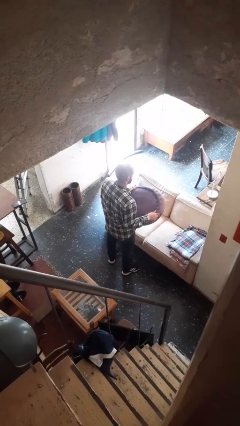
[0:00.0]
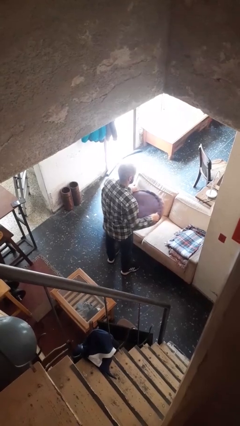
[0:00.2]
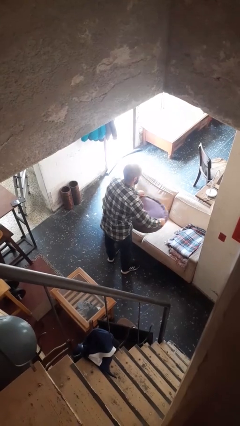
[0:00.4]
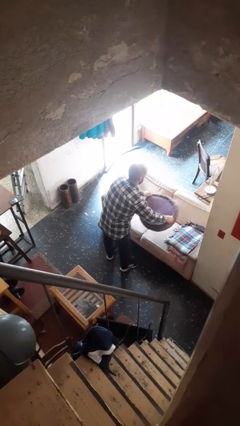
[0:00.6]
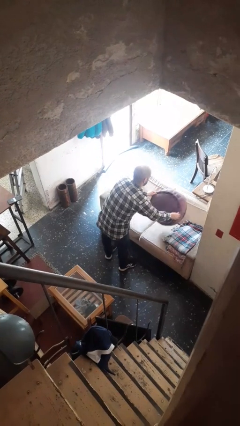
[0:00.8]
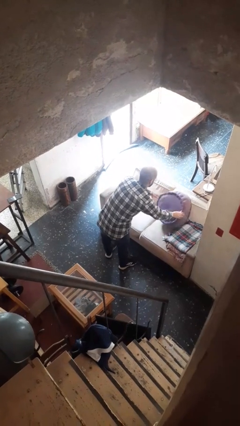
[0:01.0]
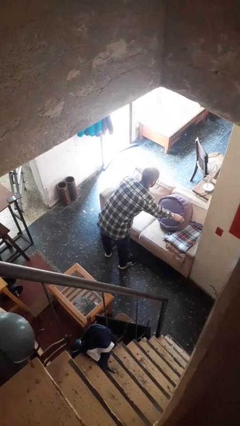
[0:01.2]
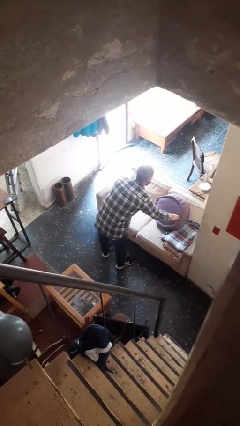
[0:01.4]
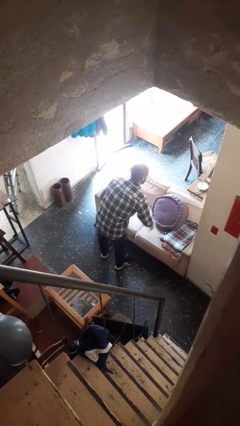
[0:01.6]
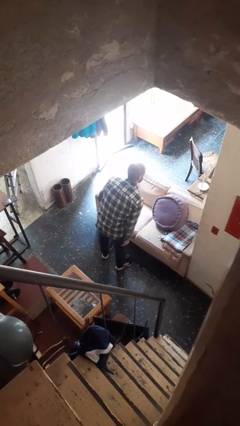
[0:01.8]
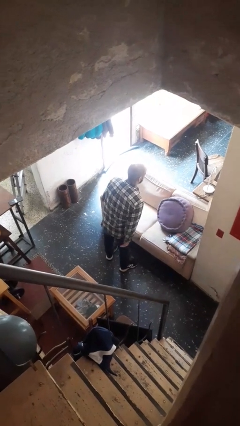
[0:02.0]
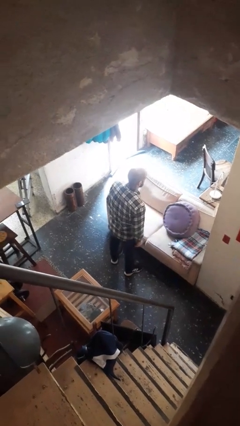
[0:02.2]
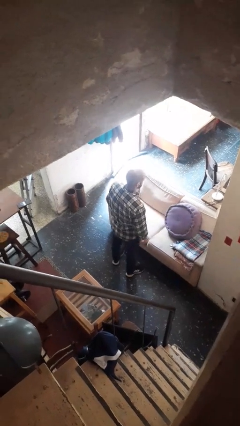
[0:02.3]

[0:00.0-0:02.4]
person puts down object on couch

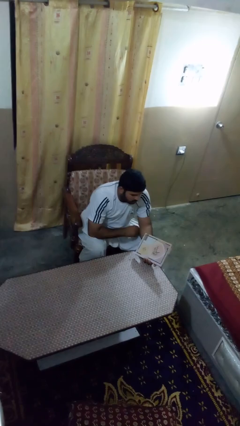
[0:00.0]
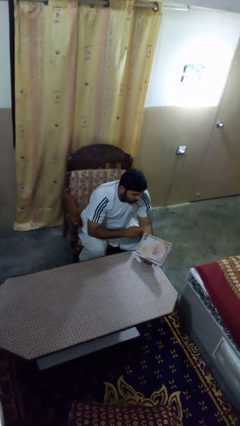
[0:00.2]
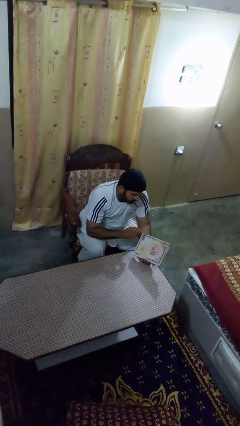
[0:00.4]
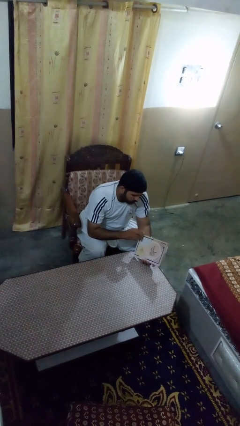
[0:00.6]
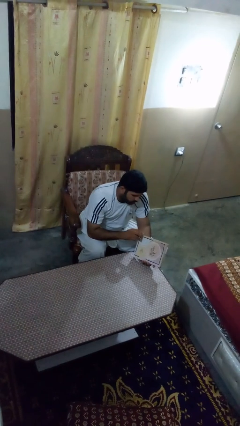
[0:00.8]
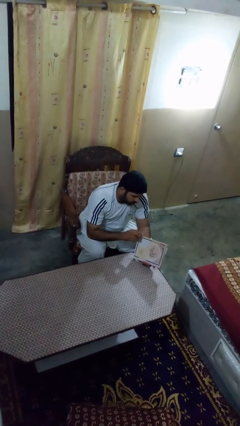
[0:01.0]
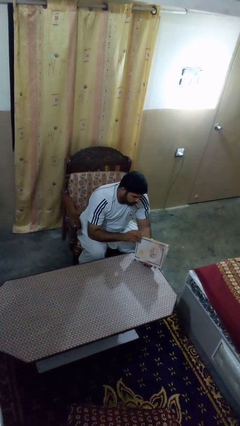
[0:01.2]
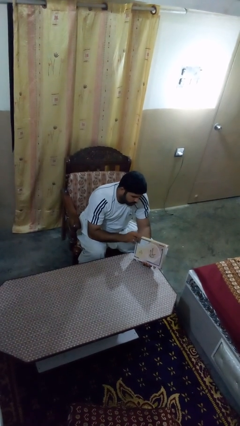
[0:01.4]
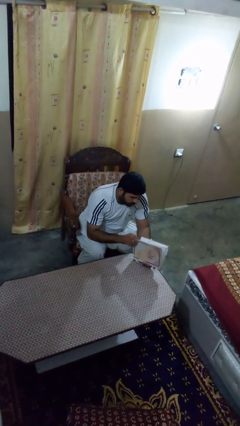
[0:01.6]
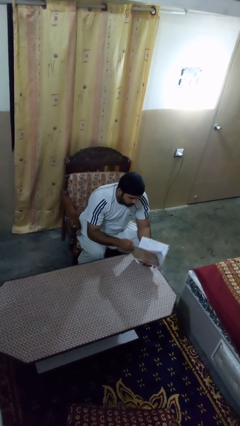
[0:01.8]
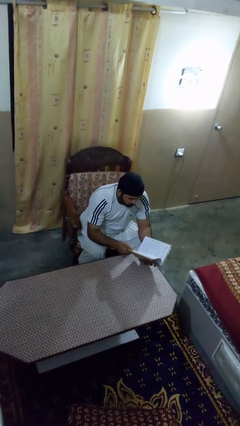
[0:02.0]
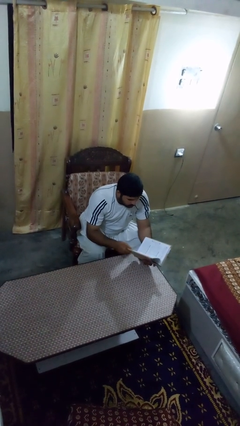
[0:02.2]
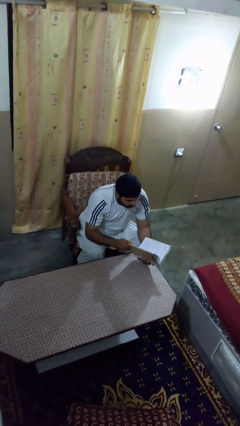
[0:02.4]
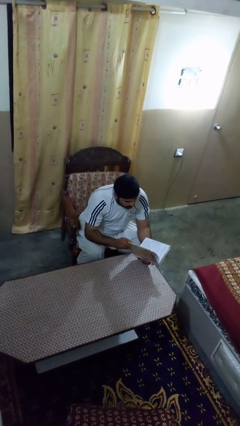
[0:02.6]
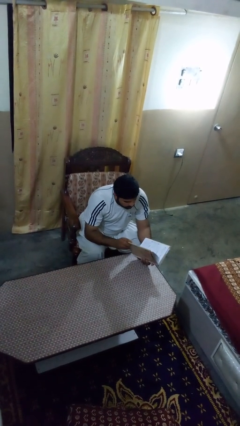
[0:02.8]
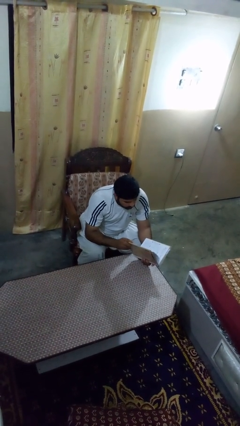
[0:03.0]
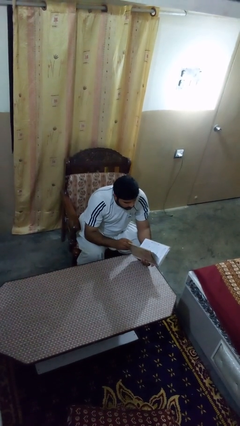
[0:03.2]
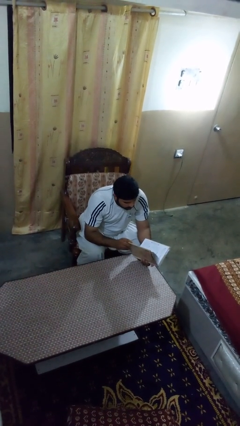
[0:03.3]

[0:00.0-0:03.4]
person reads book

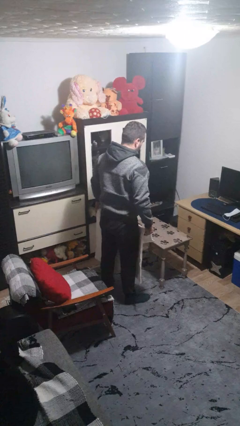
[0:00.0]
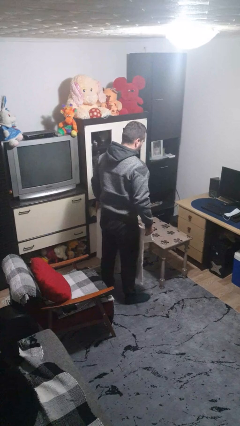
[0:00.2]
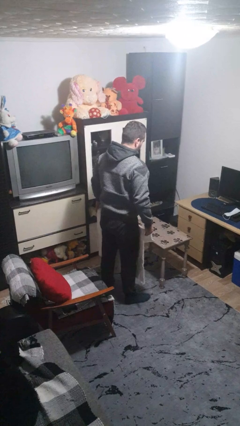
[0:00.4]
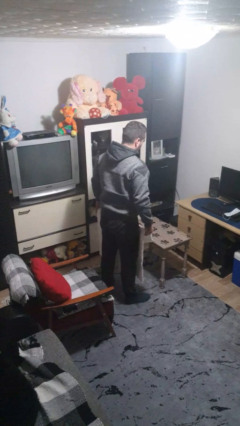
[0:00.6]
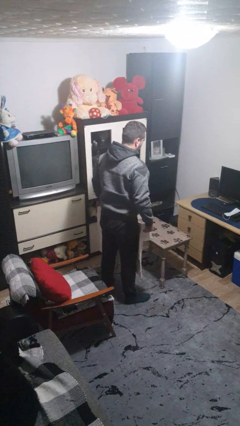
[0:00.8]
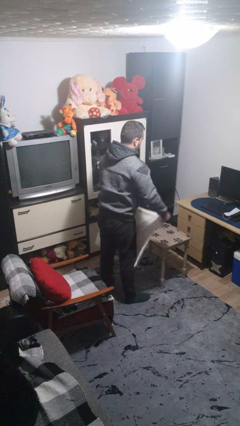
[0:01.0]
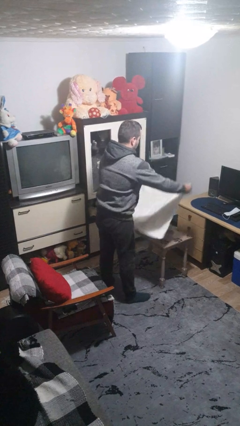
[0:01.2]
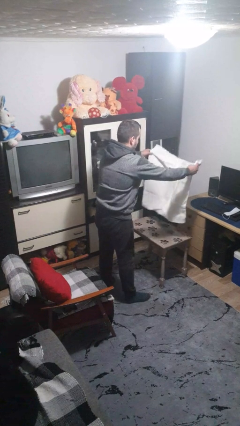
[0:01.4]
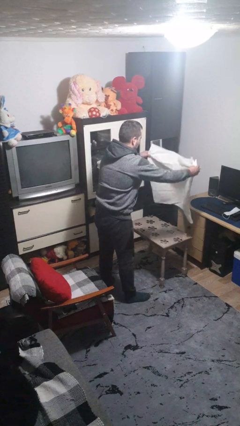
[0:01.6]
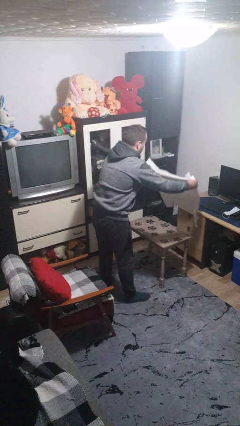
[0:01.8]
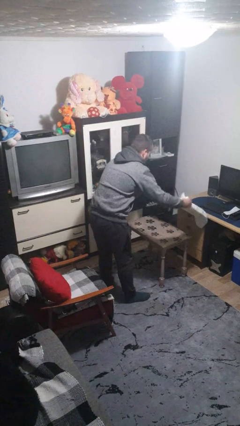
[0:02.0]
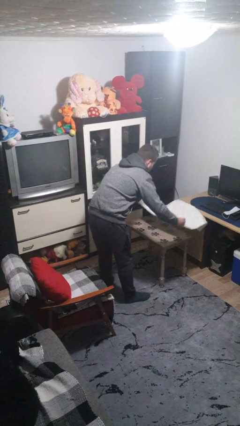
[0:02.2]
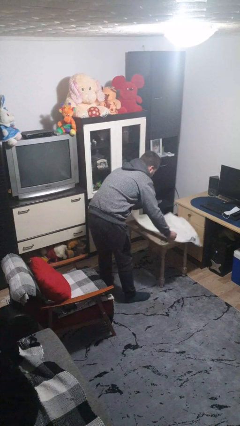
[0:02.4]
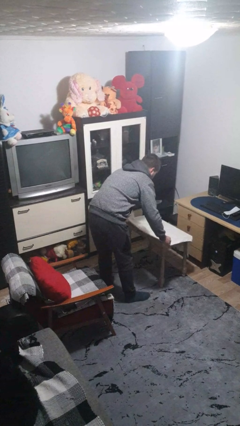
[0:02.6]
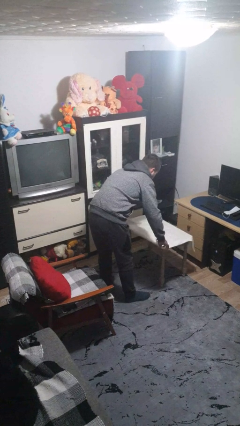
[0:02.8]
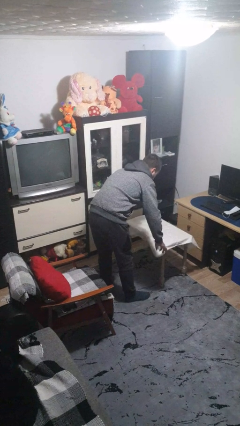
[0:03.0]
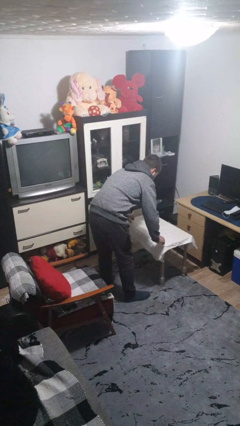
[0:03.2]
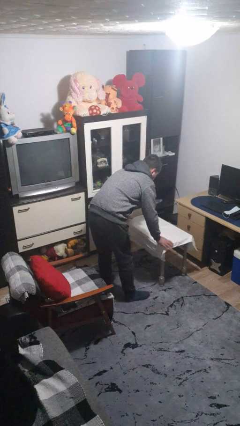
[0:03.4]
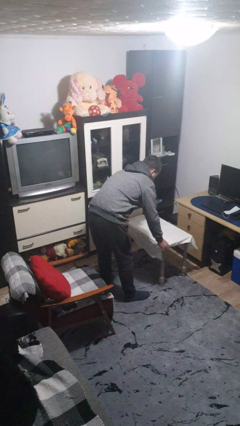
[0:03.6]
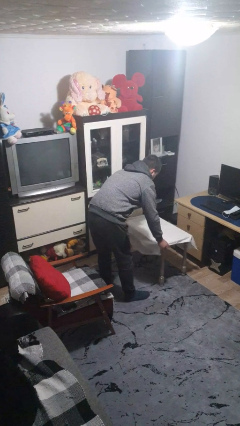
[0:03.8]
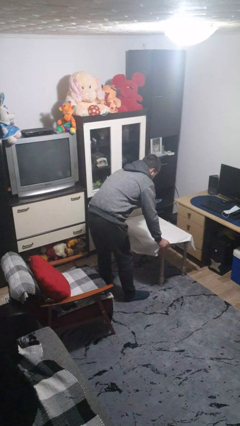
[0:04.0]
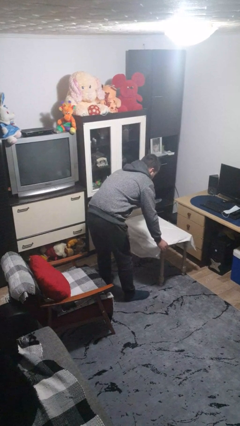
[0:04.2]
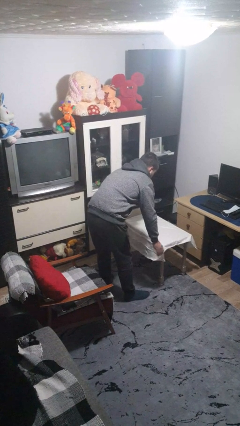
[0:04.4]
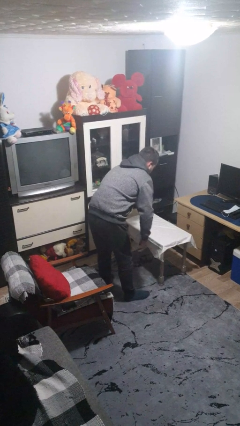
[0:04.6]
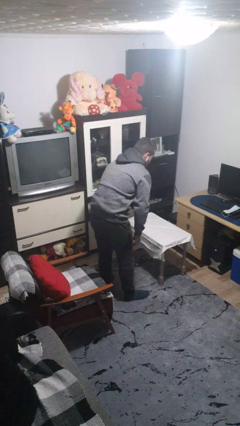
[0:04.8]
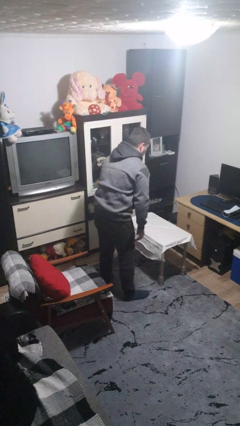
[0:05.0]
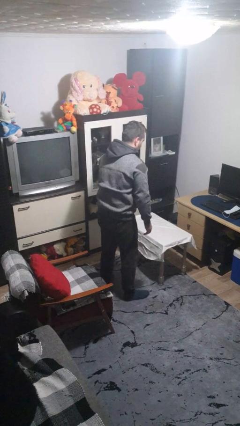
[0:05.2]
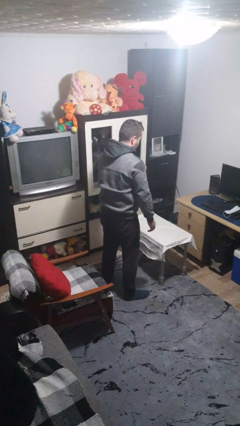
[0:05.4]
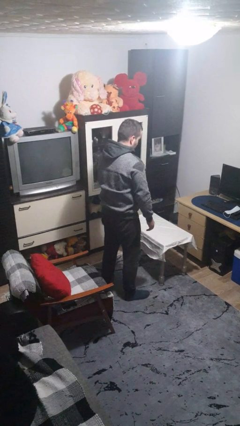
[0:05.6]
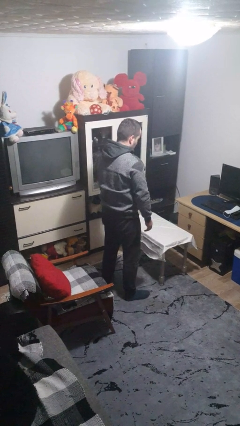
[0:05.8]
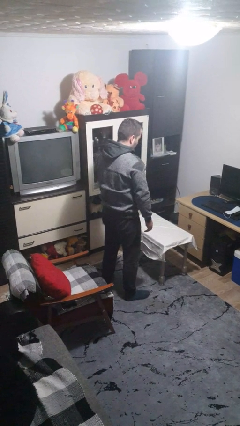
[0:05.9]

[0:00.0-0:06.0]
person spreads tablecloth

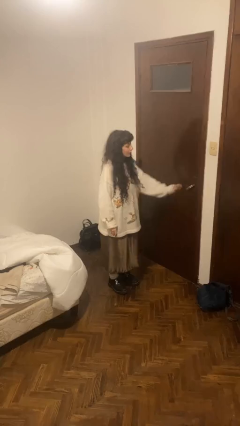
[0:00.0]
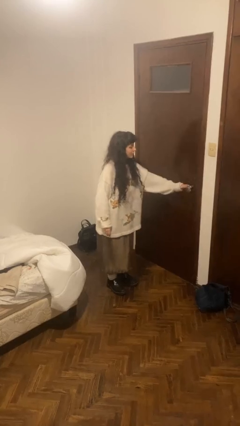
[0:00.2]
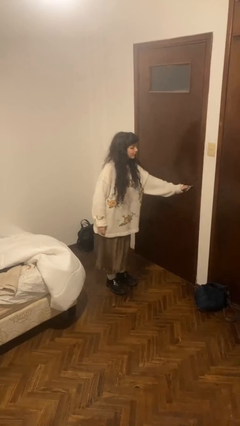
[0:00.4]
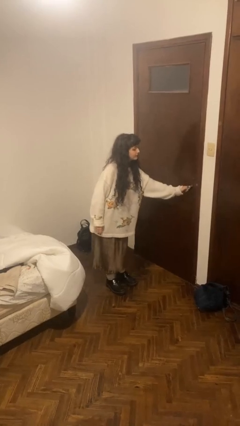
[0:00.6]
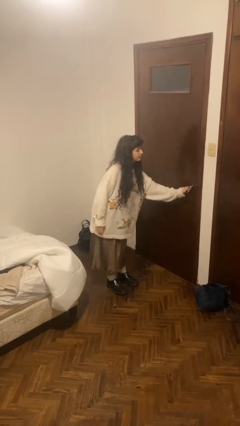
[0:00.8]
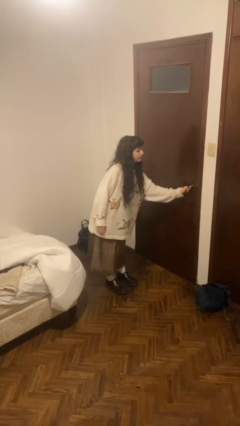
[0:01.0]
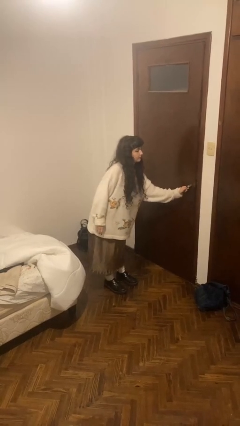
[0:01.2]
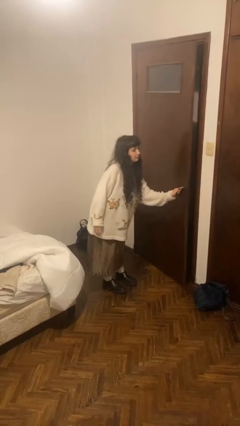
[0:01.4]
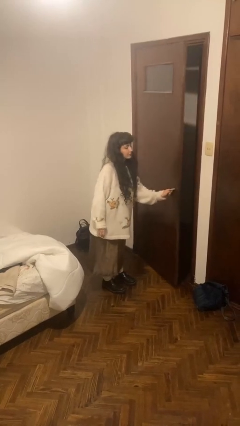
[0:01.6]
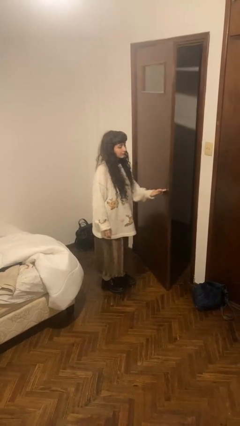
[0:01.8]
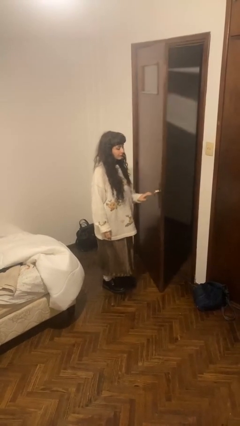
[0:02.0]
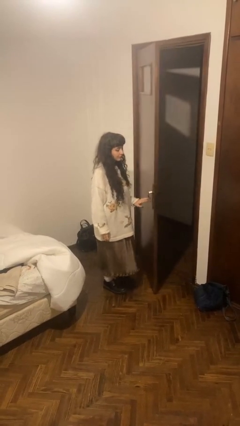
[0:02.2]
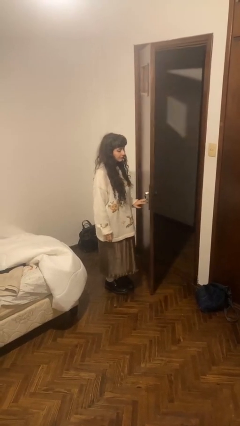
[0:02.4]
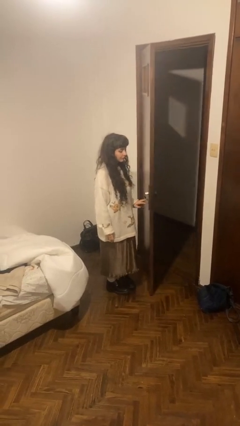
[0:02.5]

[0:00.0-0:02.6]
person opens facility door

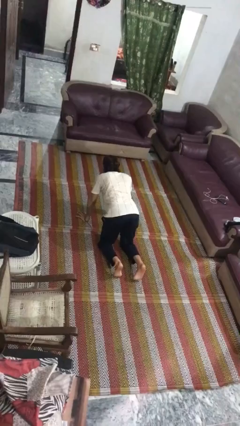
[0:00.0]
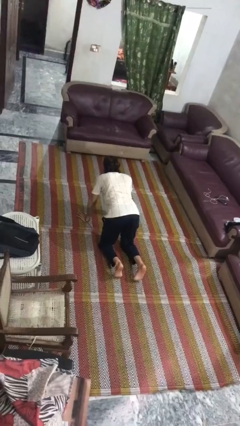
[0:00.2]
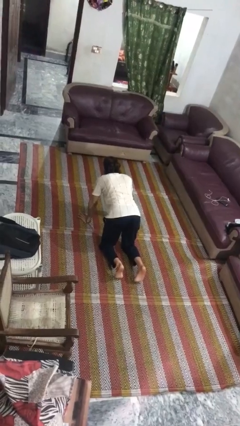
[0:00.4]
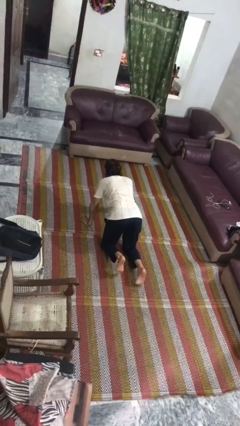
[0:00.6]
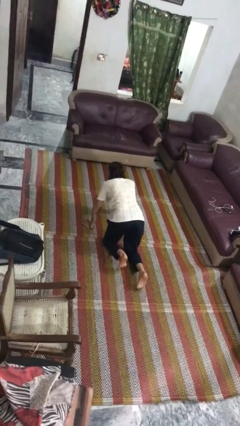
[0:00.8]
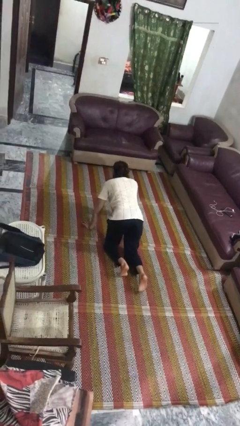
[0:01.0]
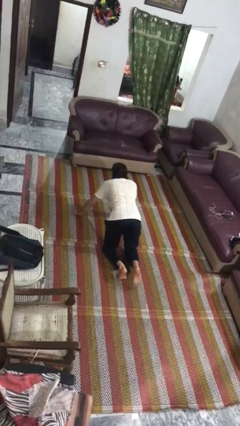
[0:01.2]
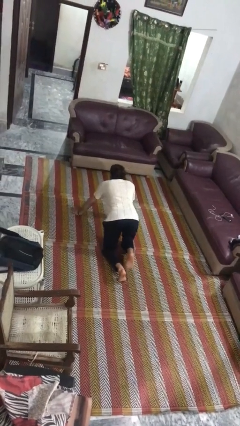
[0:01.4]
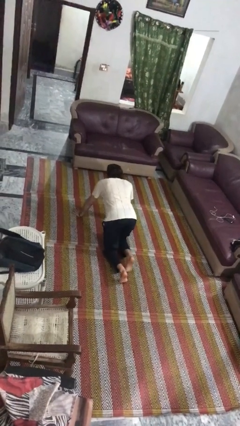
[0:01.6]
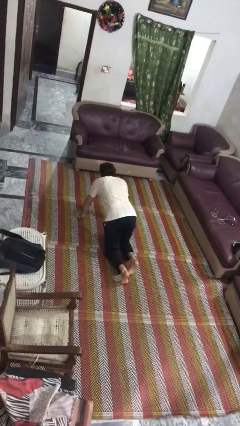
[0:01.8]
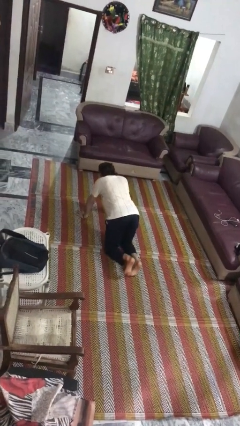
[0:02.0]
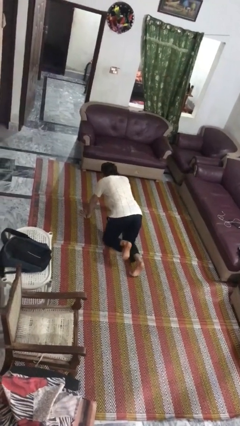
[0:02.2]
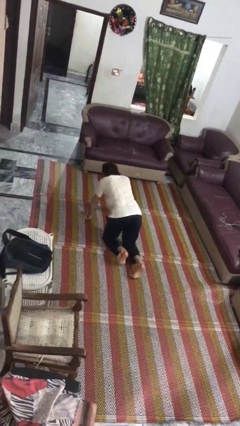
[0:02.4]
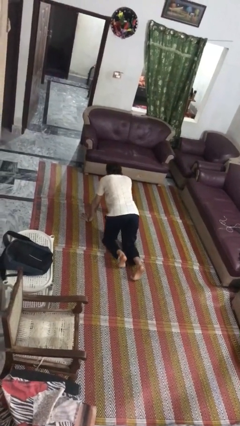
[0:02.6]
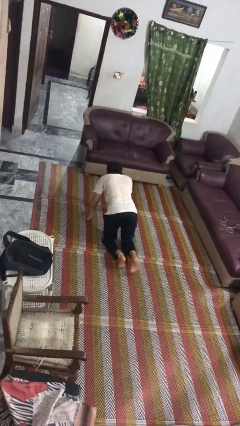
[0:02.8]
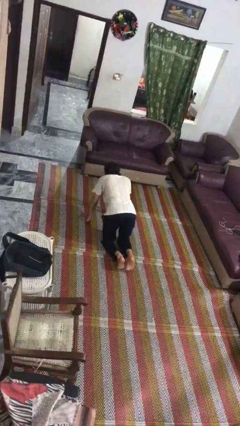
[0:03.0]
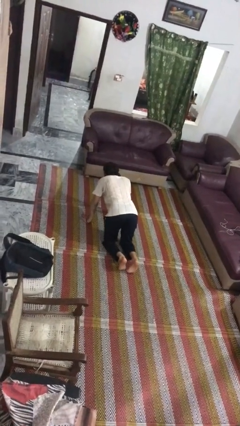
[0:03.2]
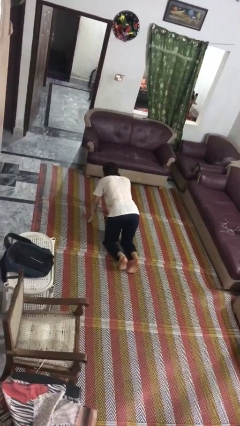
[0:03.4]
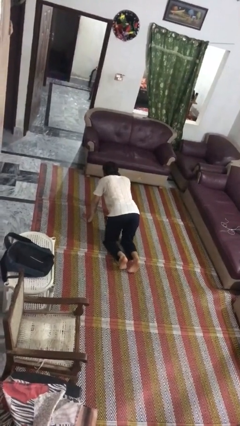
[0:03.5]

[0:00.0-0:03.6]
person crawls
